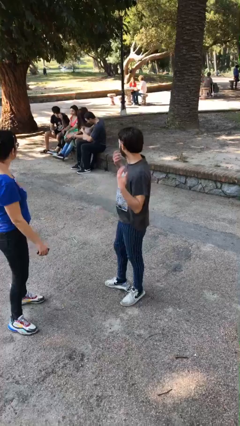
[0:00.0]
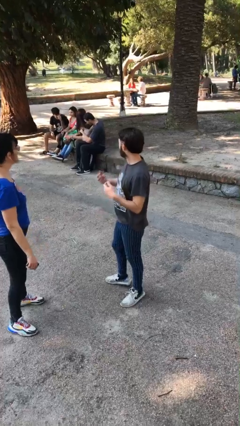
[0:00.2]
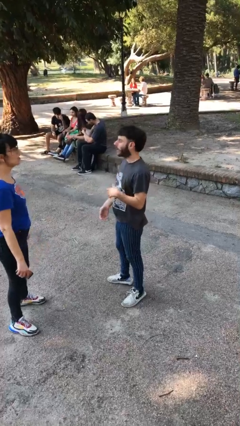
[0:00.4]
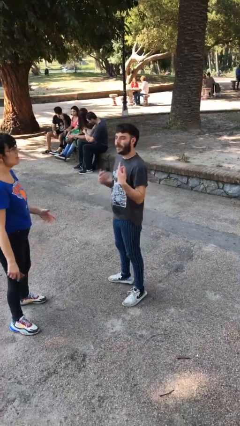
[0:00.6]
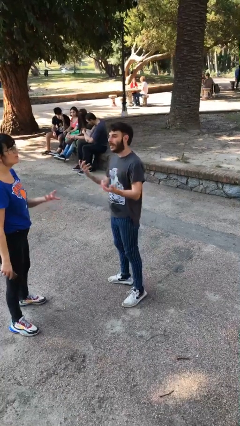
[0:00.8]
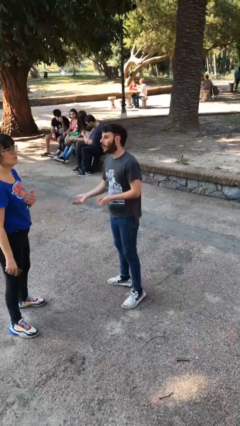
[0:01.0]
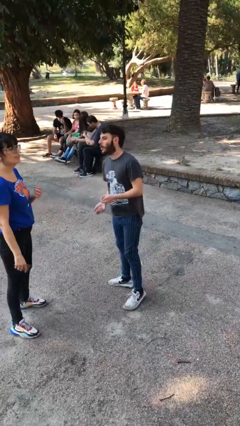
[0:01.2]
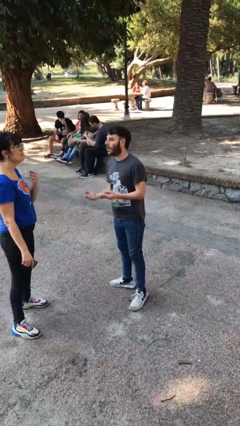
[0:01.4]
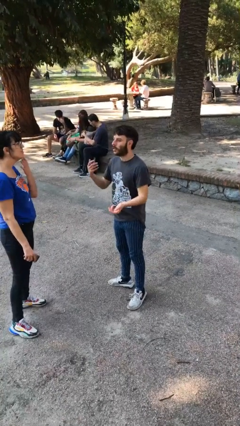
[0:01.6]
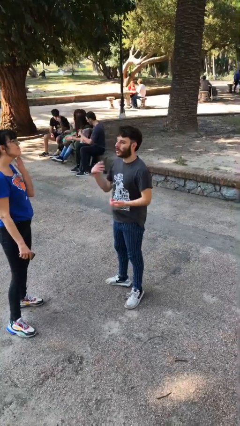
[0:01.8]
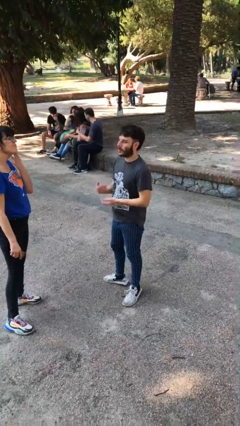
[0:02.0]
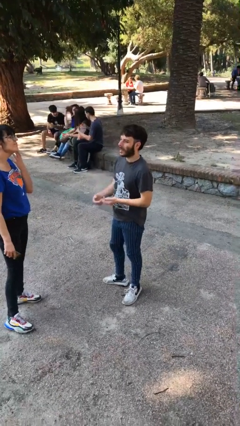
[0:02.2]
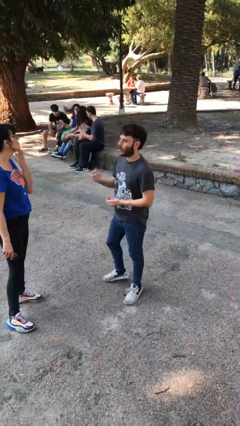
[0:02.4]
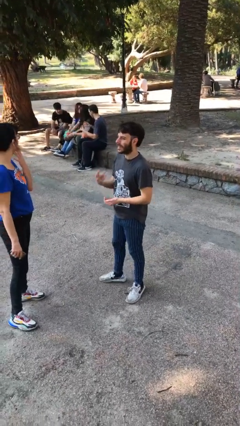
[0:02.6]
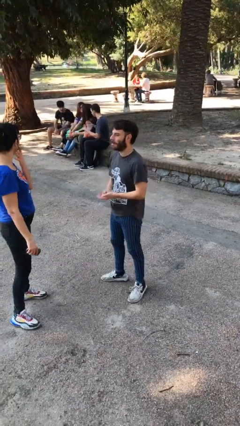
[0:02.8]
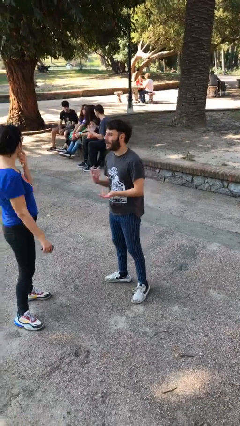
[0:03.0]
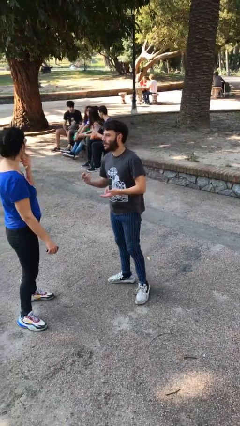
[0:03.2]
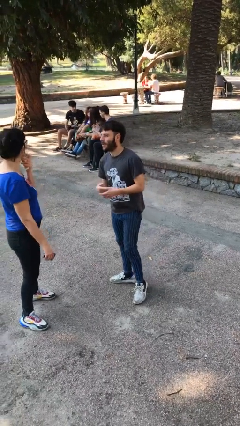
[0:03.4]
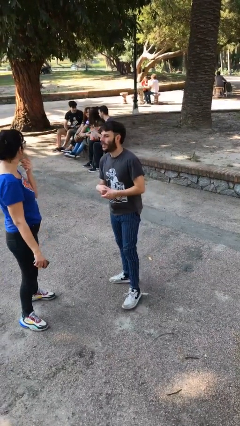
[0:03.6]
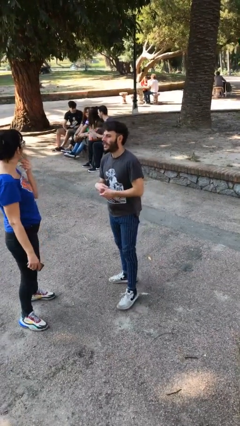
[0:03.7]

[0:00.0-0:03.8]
person talks to person

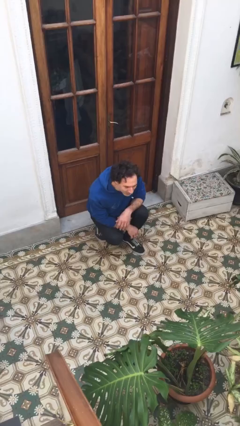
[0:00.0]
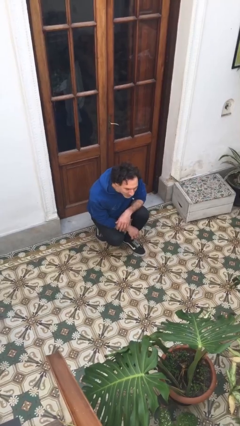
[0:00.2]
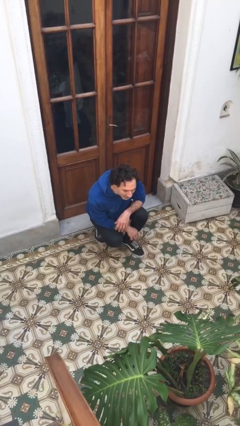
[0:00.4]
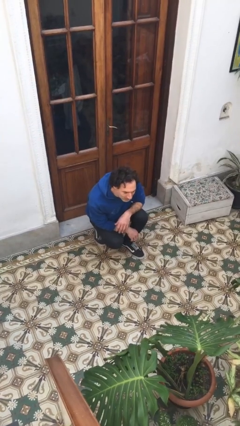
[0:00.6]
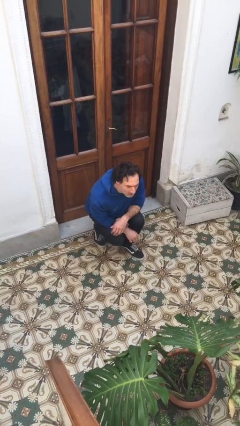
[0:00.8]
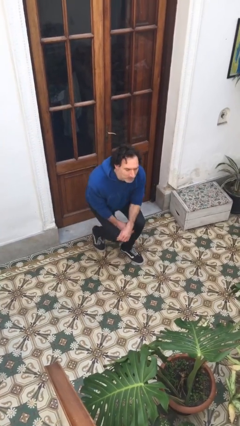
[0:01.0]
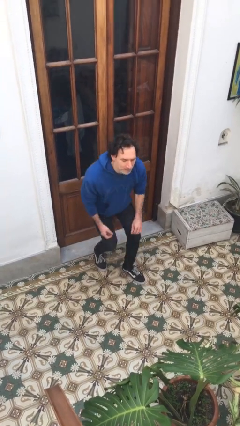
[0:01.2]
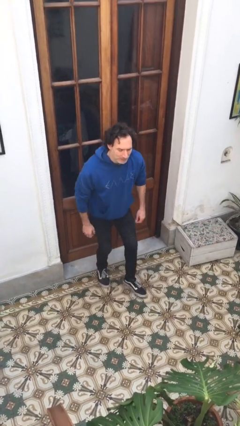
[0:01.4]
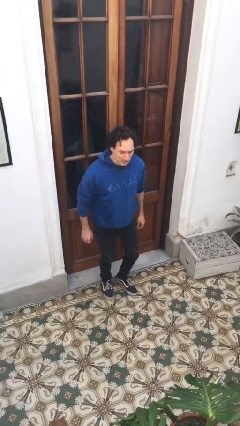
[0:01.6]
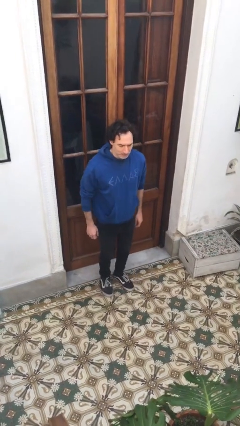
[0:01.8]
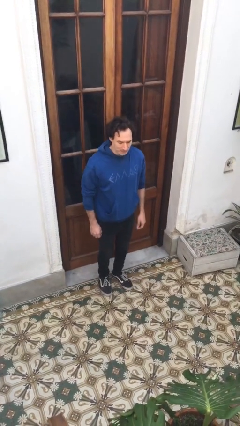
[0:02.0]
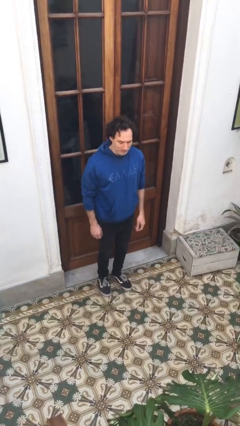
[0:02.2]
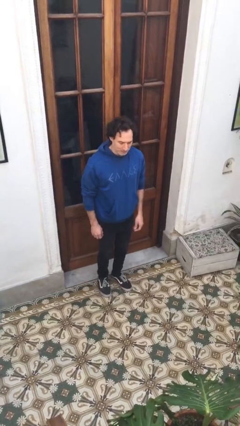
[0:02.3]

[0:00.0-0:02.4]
person stands up

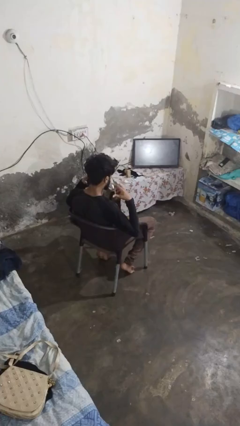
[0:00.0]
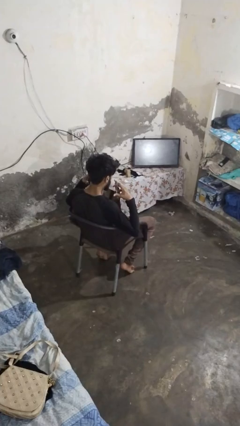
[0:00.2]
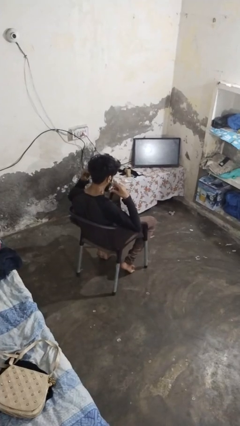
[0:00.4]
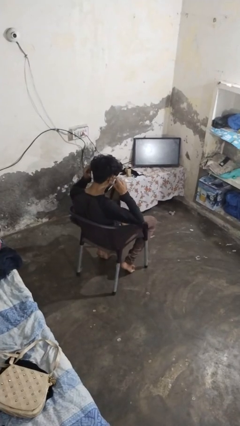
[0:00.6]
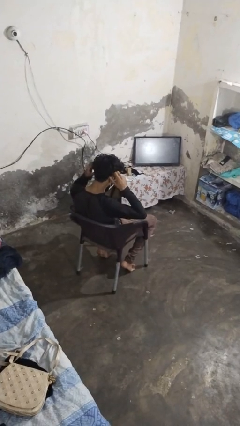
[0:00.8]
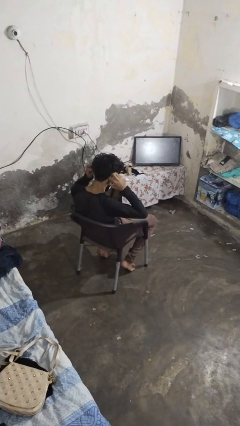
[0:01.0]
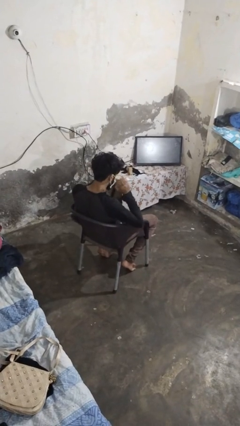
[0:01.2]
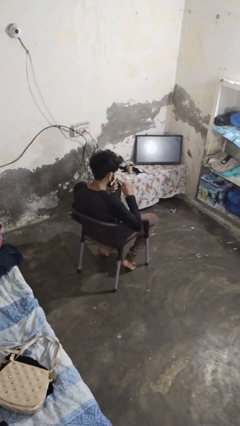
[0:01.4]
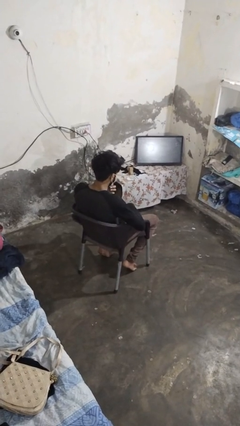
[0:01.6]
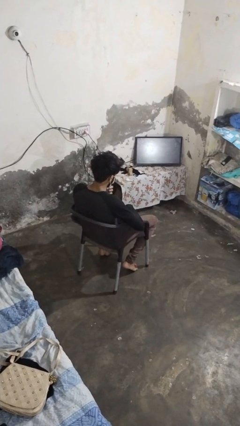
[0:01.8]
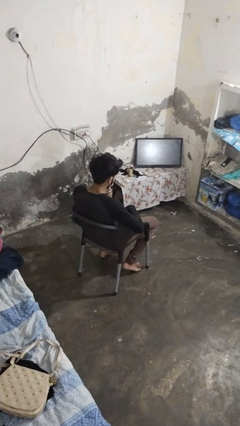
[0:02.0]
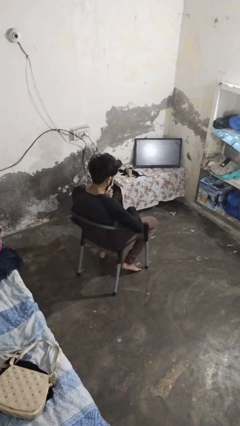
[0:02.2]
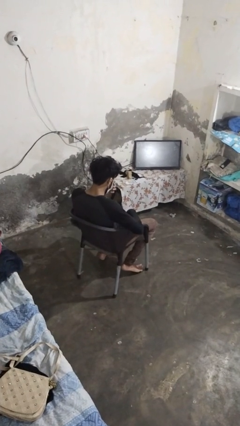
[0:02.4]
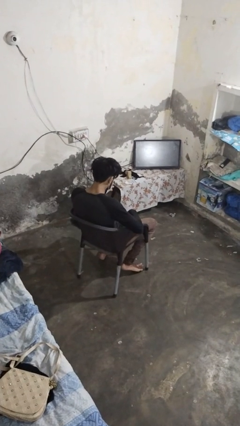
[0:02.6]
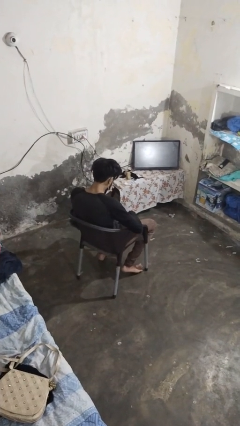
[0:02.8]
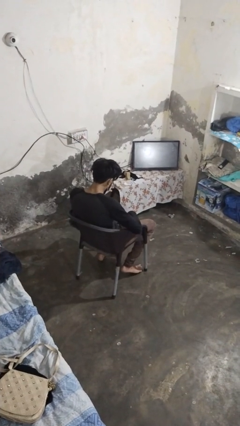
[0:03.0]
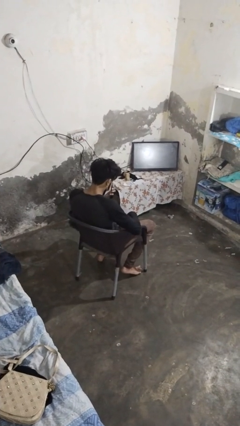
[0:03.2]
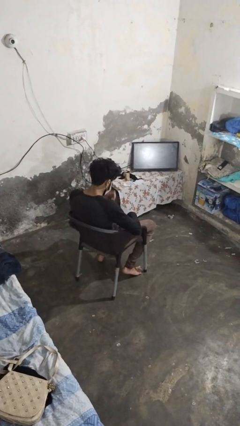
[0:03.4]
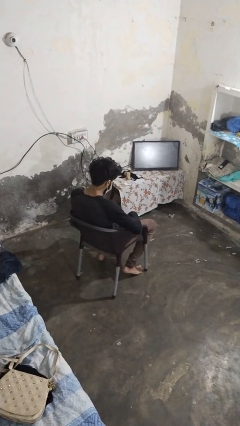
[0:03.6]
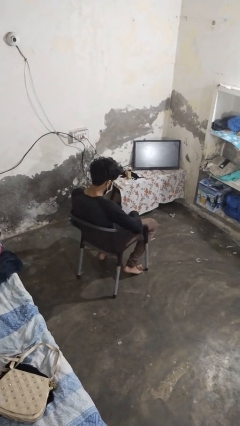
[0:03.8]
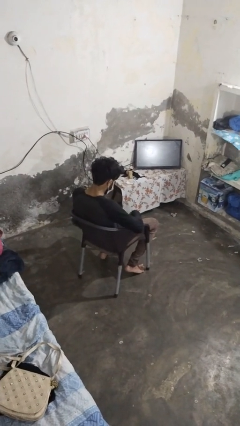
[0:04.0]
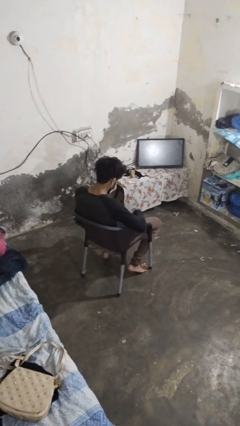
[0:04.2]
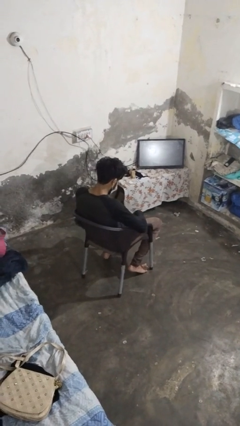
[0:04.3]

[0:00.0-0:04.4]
person puts on facemask

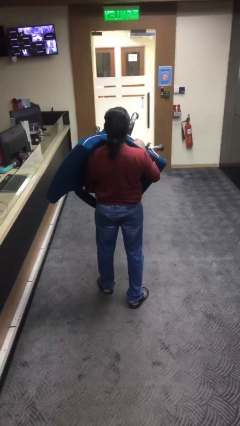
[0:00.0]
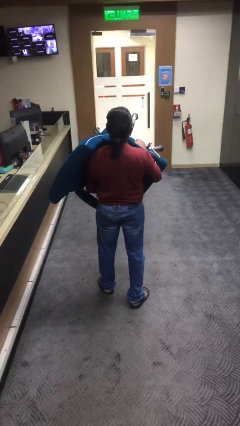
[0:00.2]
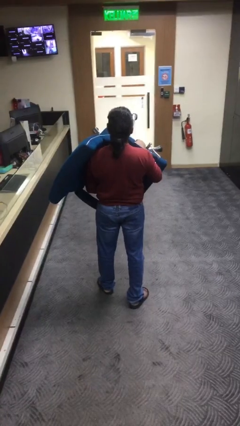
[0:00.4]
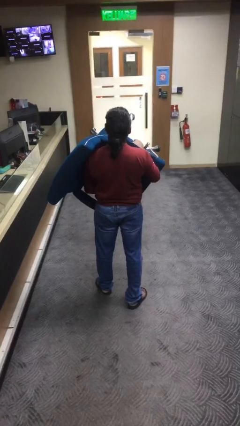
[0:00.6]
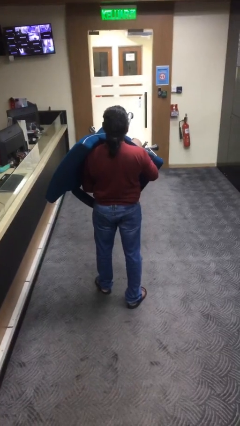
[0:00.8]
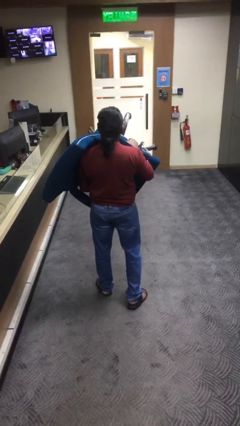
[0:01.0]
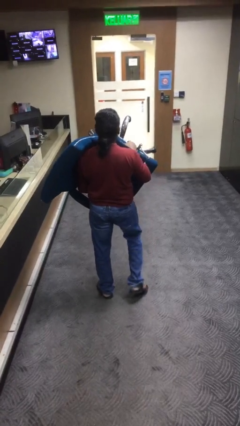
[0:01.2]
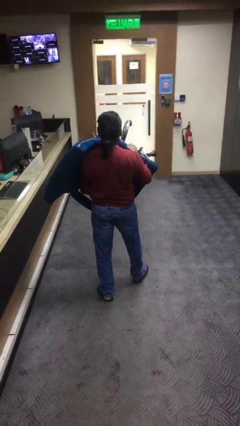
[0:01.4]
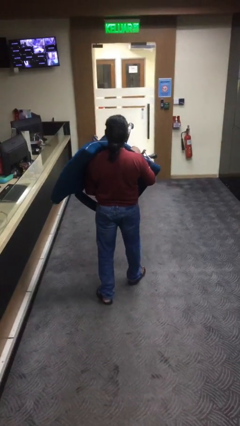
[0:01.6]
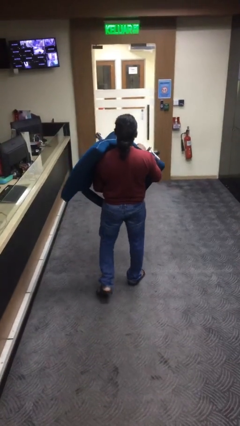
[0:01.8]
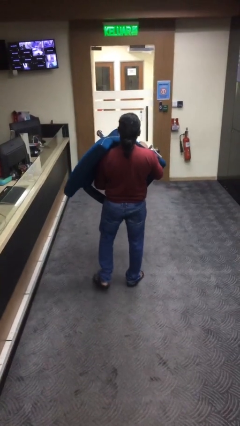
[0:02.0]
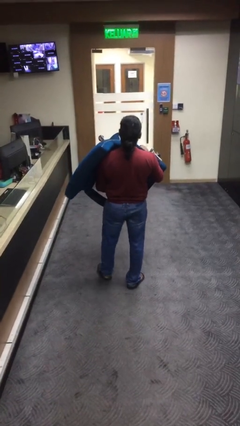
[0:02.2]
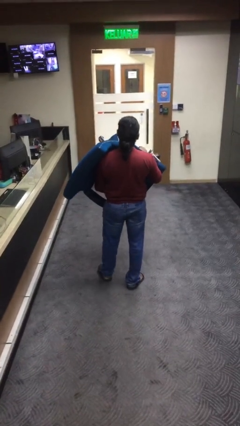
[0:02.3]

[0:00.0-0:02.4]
person carries furniture

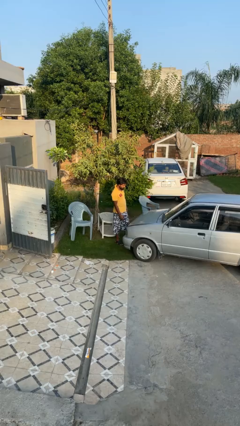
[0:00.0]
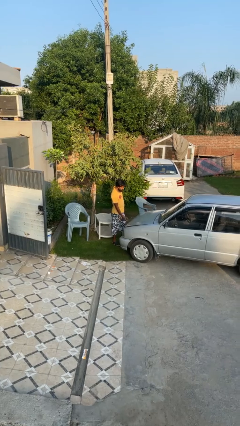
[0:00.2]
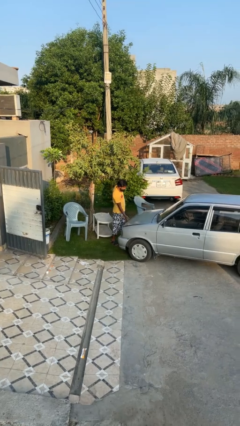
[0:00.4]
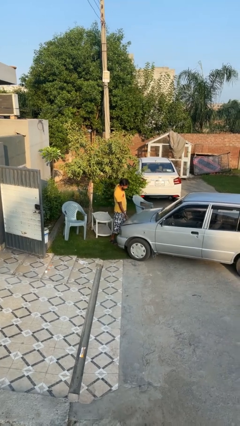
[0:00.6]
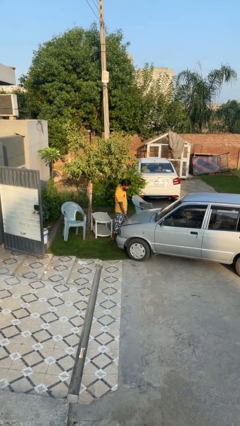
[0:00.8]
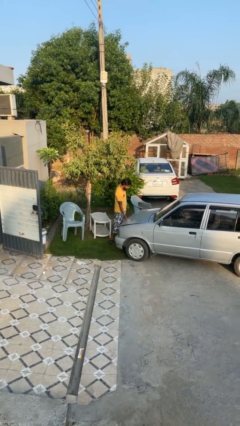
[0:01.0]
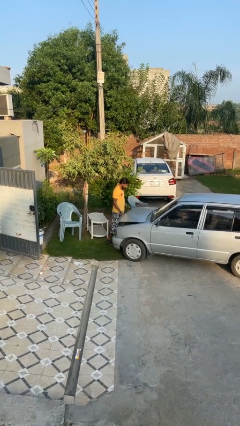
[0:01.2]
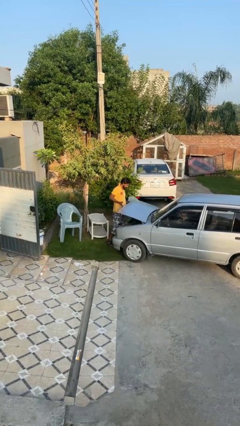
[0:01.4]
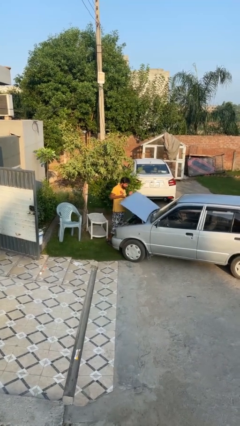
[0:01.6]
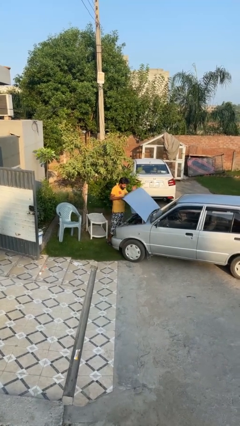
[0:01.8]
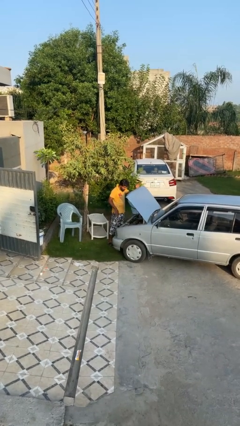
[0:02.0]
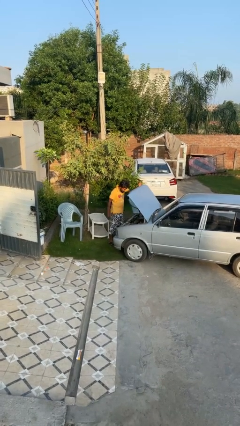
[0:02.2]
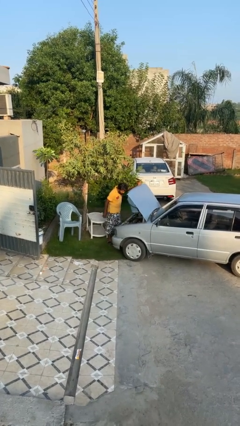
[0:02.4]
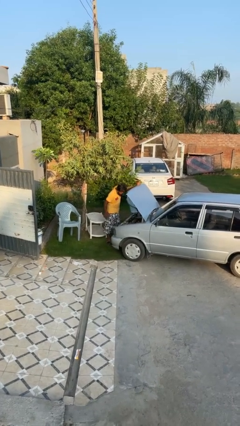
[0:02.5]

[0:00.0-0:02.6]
person opens car hood

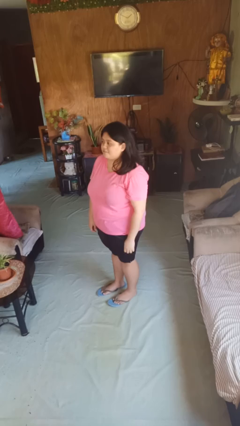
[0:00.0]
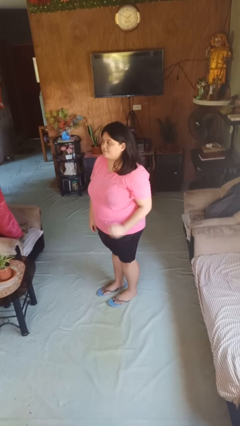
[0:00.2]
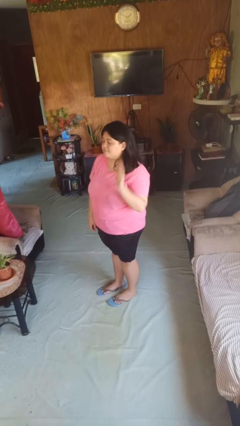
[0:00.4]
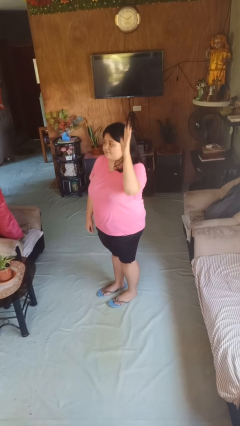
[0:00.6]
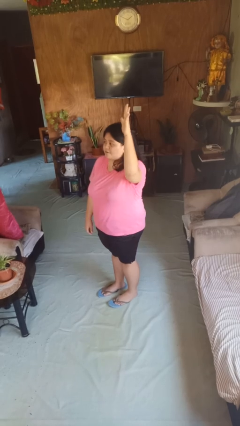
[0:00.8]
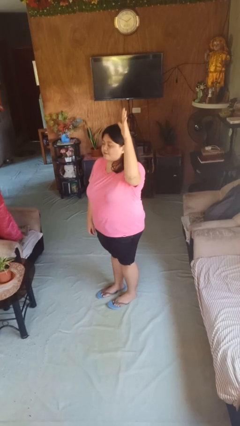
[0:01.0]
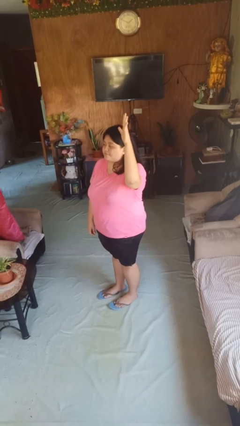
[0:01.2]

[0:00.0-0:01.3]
person gestures raise hand
